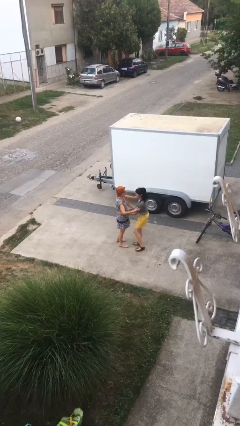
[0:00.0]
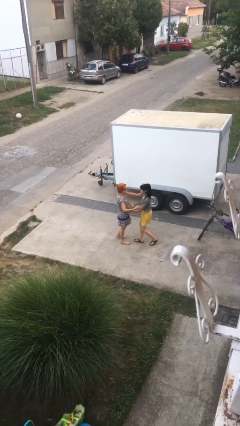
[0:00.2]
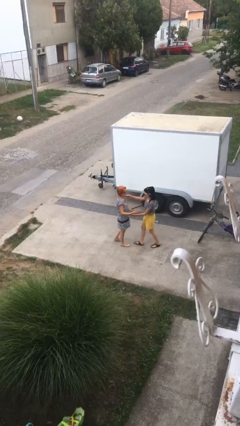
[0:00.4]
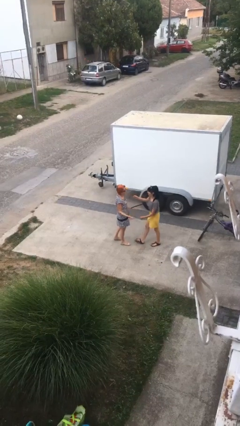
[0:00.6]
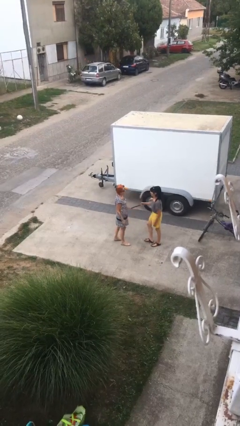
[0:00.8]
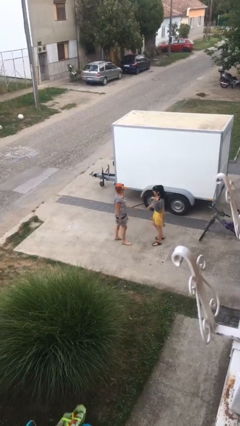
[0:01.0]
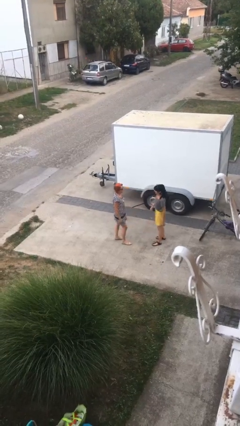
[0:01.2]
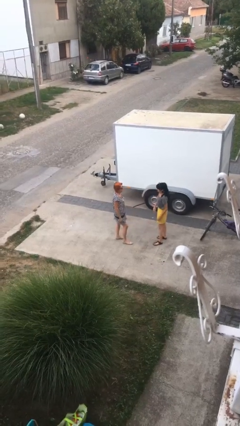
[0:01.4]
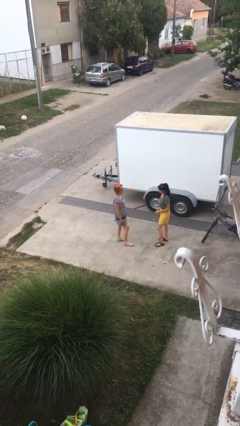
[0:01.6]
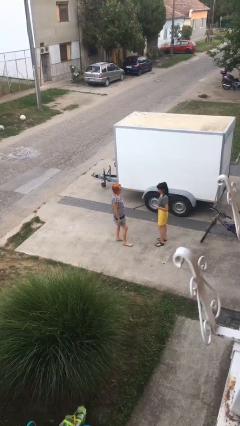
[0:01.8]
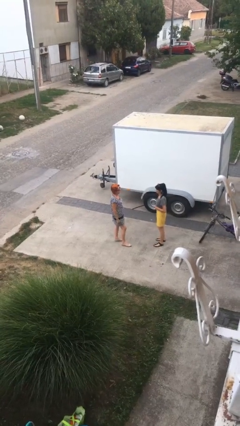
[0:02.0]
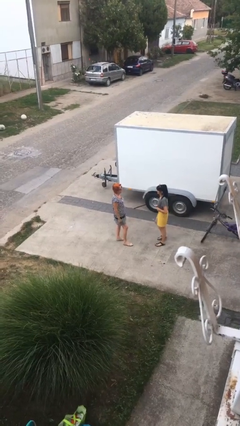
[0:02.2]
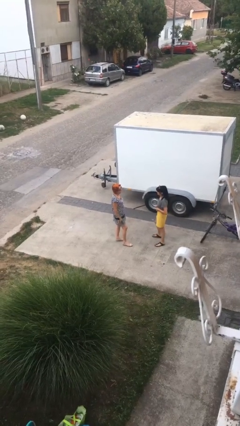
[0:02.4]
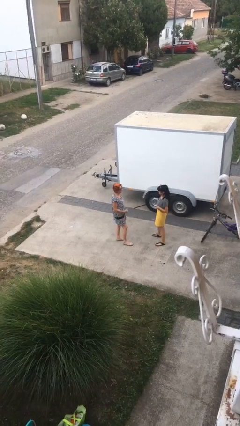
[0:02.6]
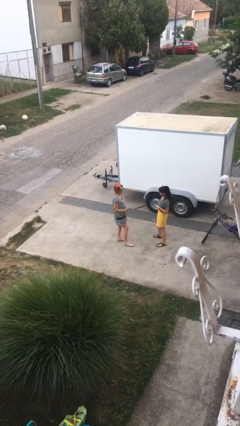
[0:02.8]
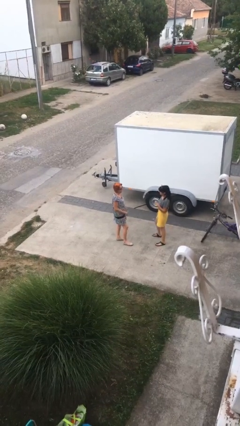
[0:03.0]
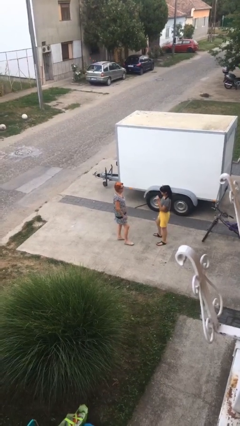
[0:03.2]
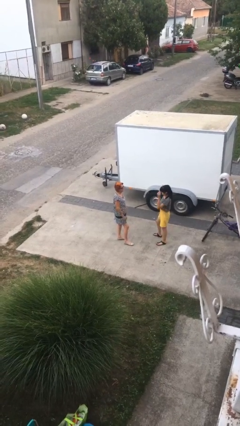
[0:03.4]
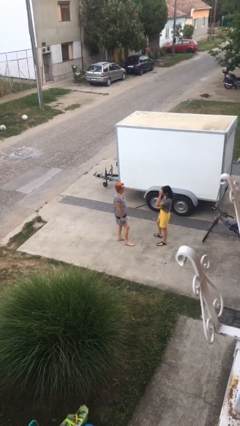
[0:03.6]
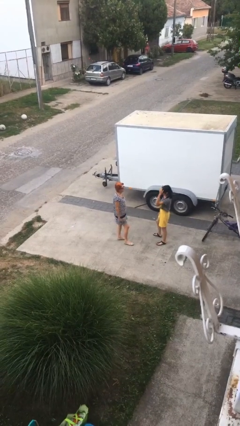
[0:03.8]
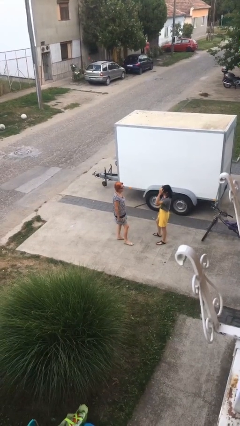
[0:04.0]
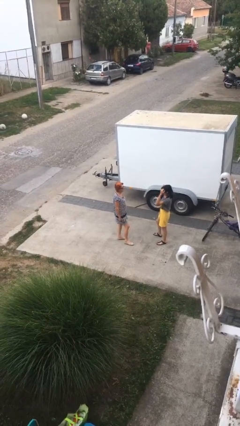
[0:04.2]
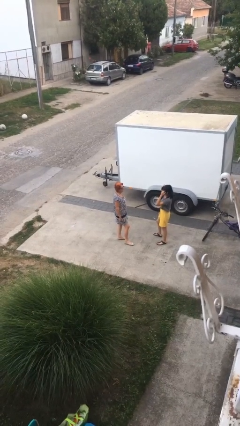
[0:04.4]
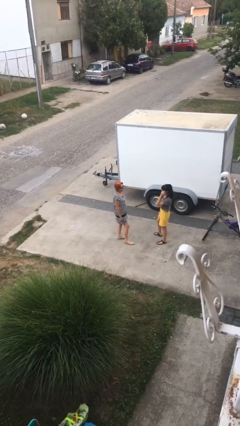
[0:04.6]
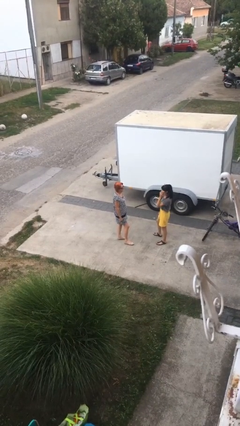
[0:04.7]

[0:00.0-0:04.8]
person talks to person

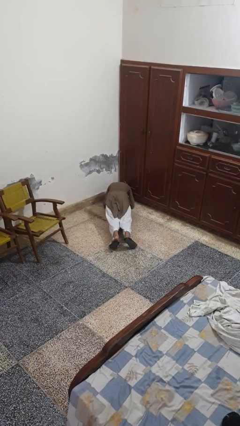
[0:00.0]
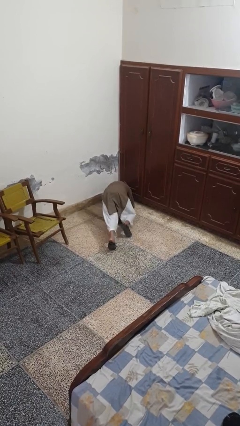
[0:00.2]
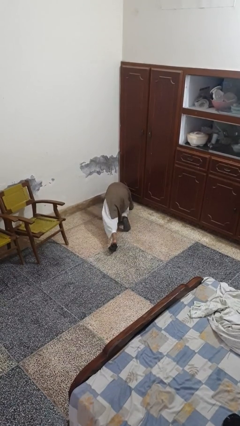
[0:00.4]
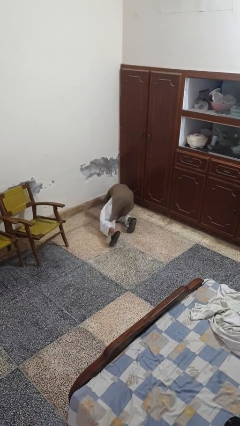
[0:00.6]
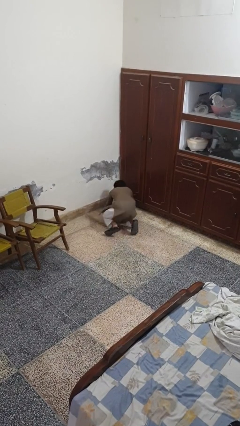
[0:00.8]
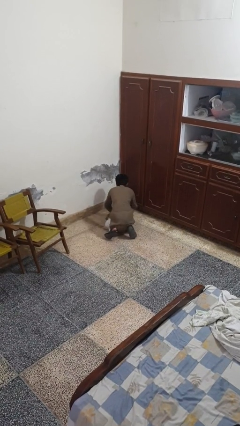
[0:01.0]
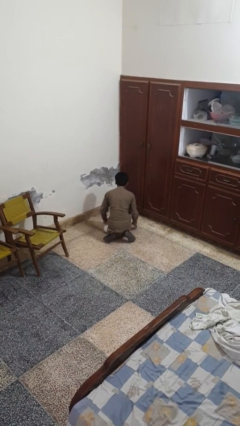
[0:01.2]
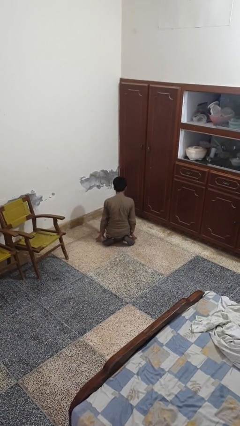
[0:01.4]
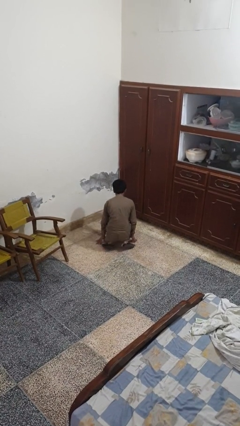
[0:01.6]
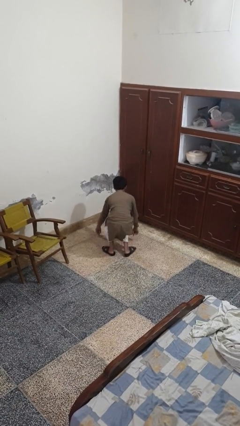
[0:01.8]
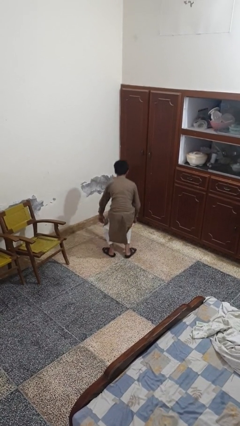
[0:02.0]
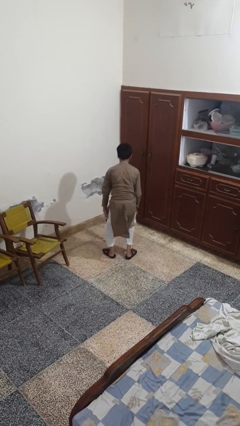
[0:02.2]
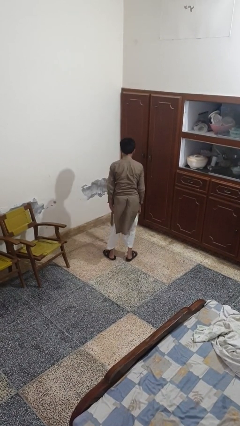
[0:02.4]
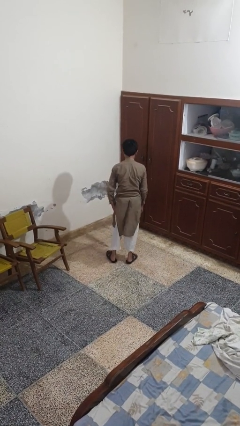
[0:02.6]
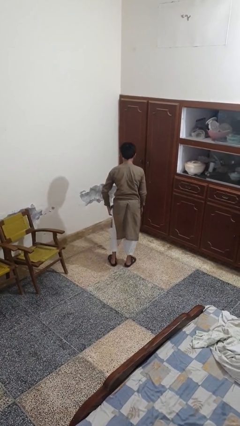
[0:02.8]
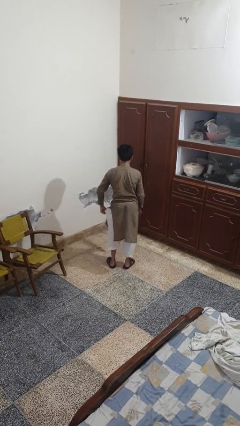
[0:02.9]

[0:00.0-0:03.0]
person stands up from floor

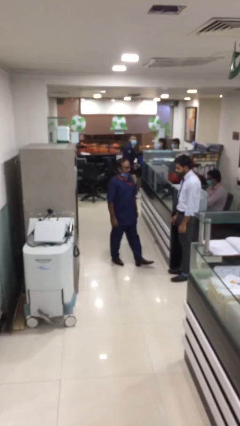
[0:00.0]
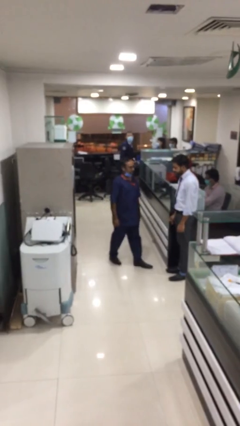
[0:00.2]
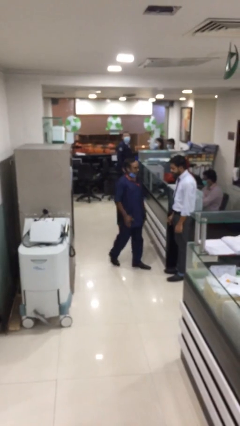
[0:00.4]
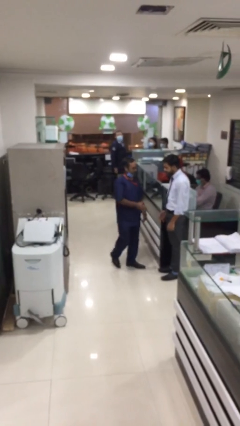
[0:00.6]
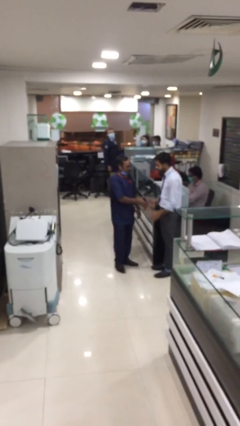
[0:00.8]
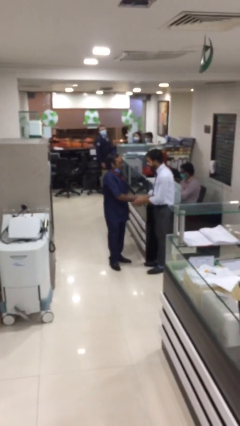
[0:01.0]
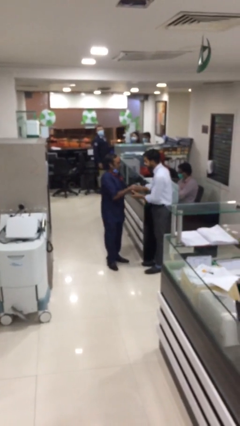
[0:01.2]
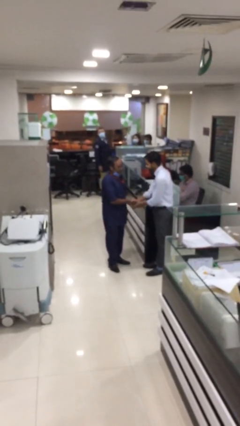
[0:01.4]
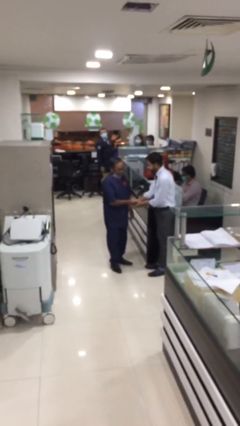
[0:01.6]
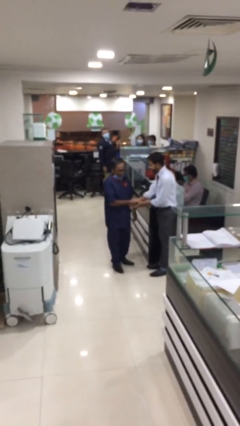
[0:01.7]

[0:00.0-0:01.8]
person shakes hand

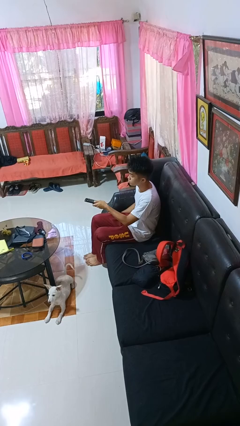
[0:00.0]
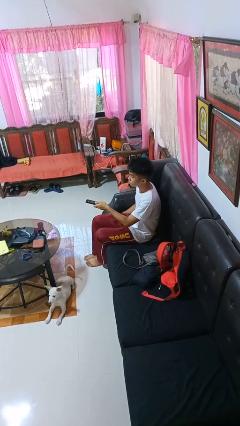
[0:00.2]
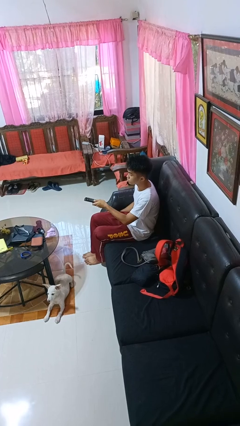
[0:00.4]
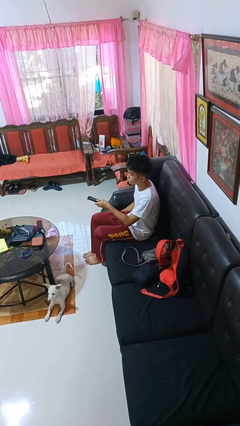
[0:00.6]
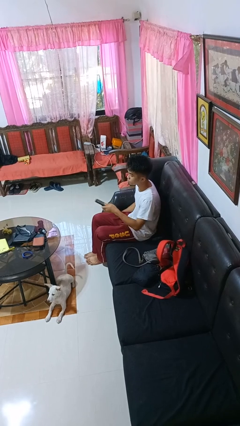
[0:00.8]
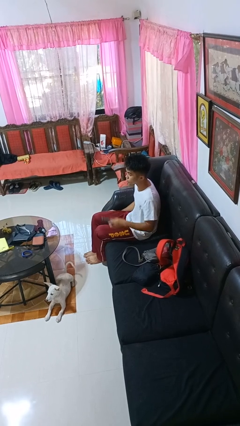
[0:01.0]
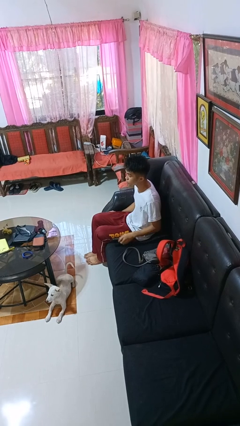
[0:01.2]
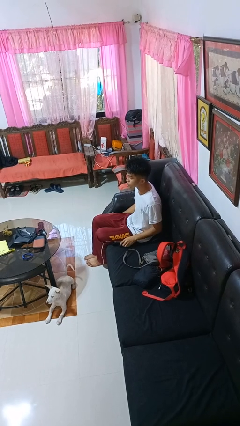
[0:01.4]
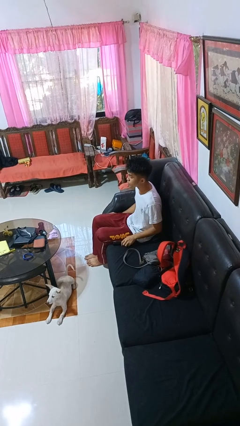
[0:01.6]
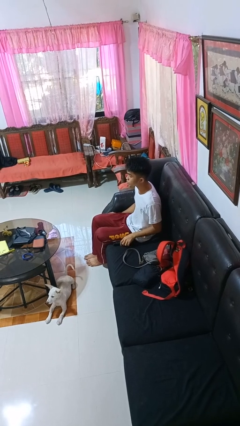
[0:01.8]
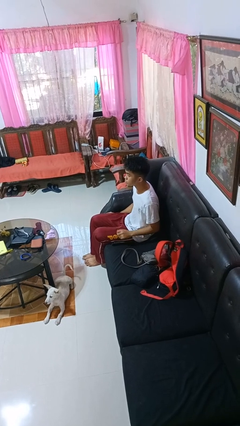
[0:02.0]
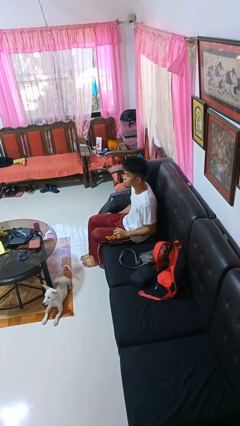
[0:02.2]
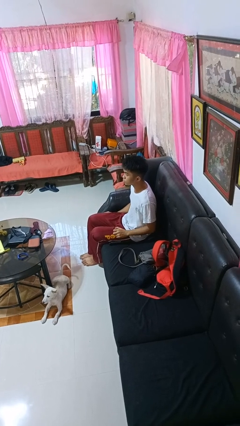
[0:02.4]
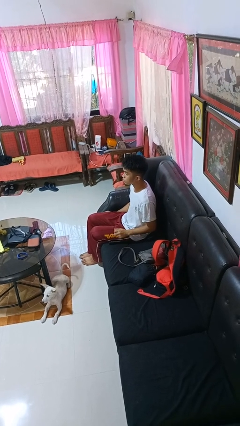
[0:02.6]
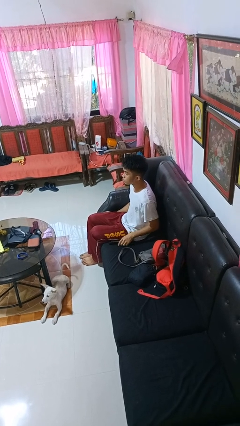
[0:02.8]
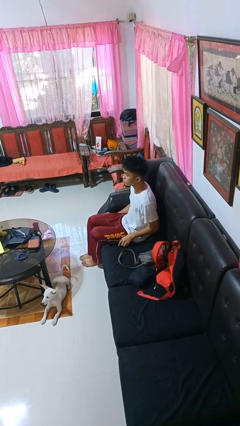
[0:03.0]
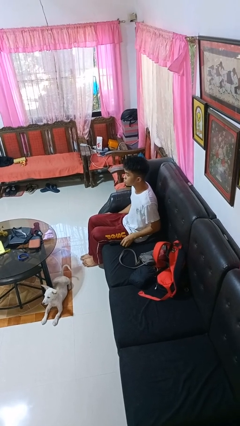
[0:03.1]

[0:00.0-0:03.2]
person picks up object from shelf

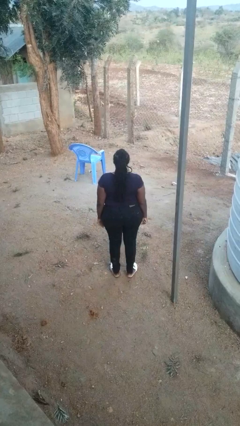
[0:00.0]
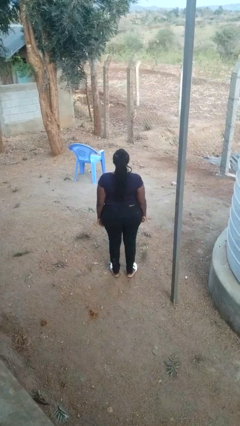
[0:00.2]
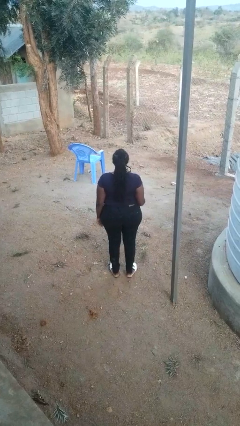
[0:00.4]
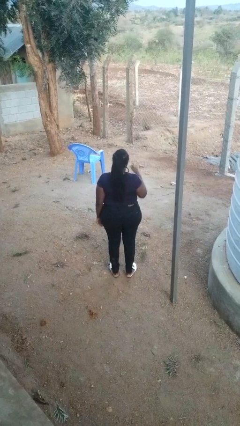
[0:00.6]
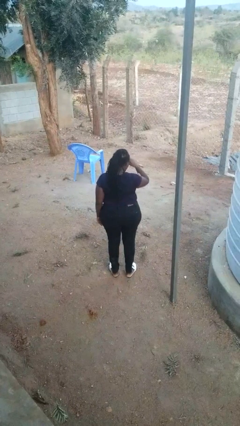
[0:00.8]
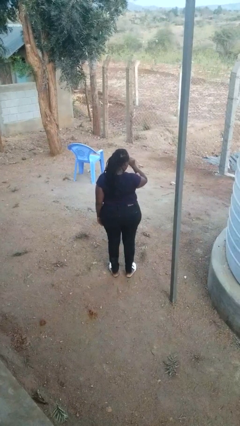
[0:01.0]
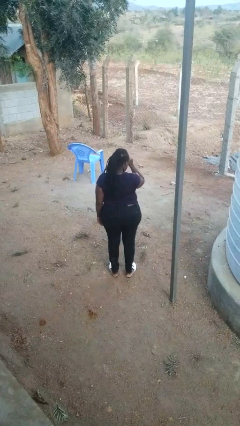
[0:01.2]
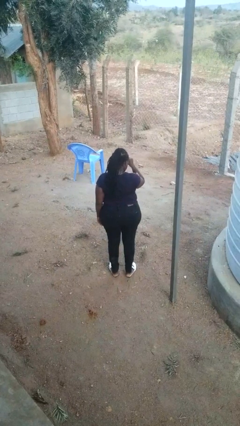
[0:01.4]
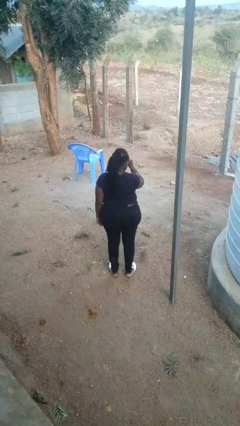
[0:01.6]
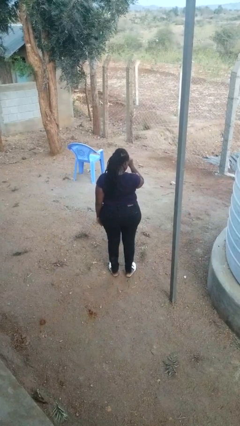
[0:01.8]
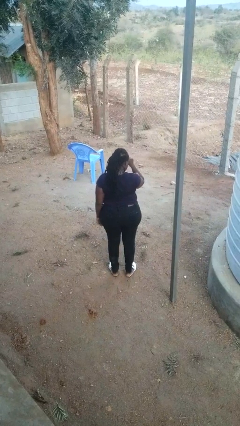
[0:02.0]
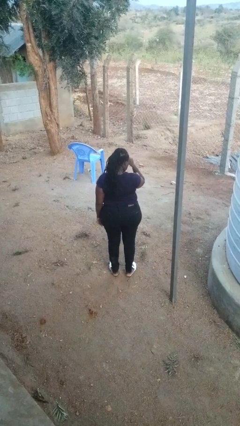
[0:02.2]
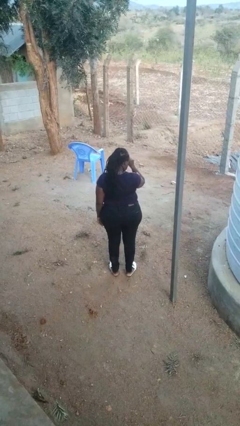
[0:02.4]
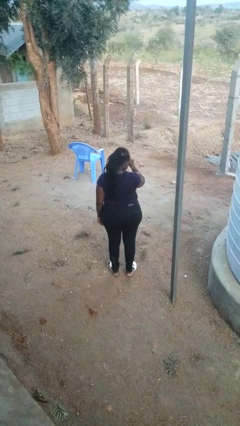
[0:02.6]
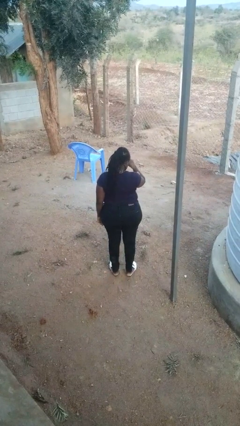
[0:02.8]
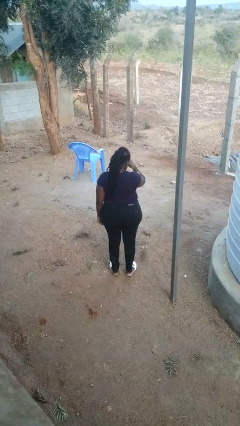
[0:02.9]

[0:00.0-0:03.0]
person rubs eyes

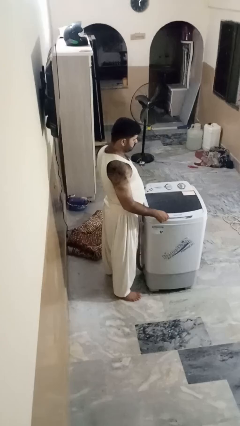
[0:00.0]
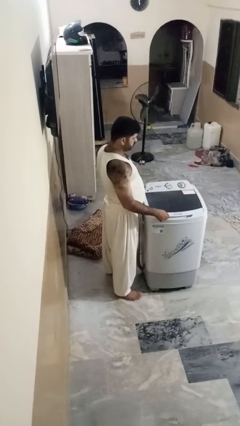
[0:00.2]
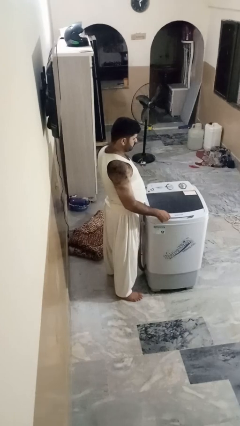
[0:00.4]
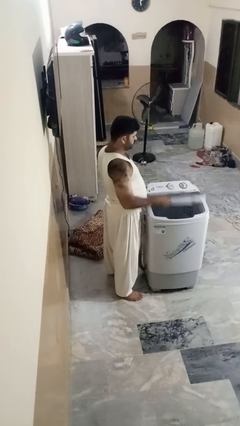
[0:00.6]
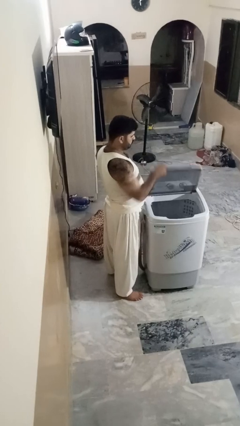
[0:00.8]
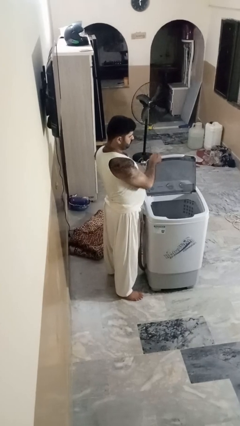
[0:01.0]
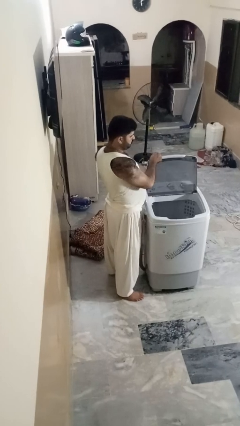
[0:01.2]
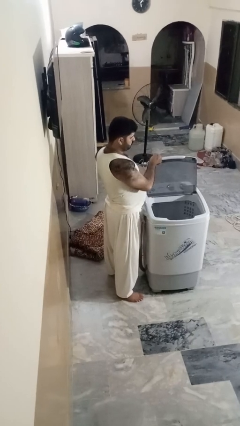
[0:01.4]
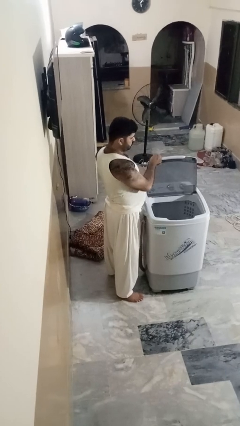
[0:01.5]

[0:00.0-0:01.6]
person opens clothes washer
